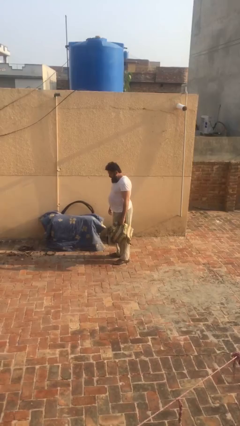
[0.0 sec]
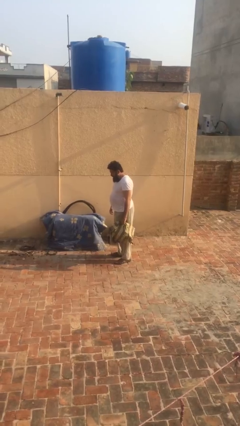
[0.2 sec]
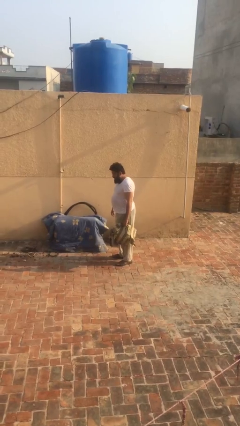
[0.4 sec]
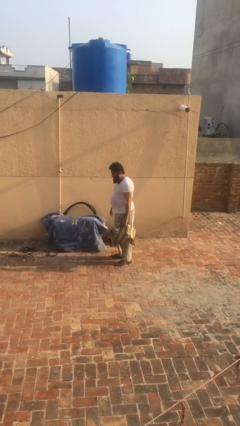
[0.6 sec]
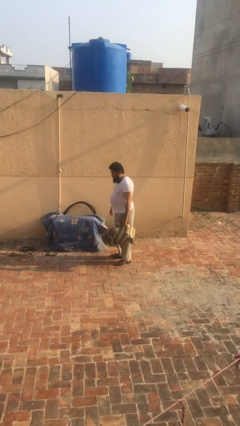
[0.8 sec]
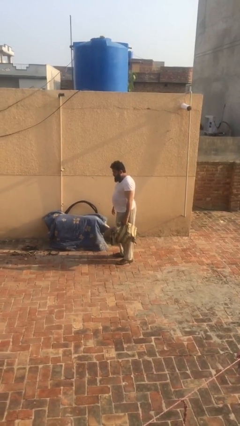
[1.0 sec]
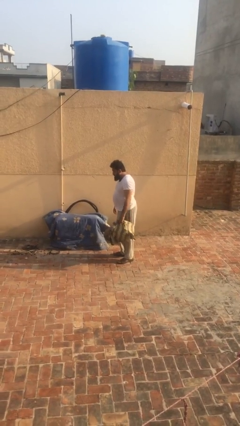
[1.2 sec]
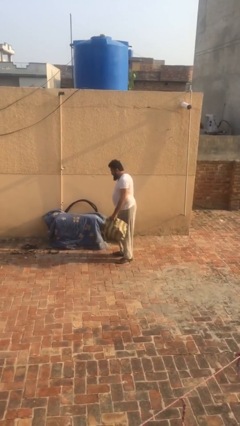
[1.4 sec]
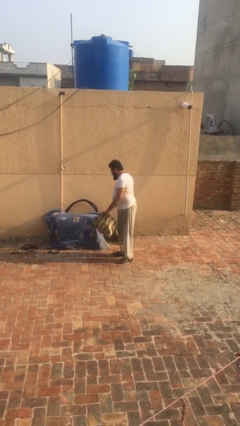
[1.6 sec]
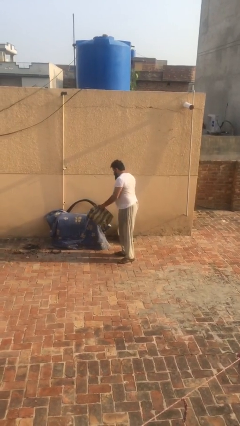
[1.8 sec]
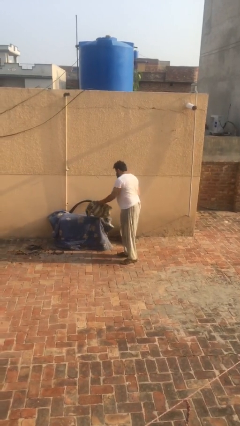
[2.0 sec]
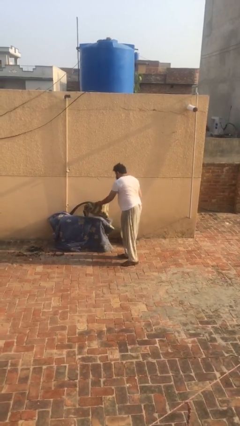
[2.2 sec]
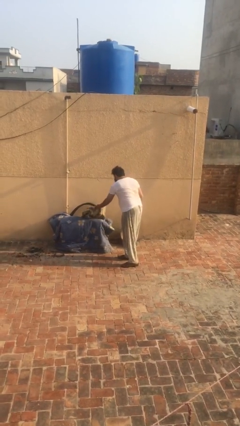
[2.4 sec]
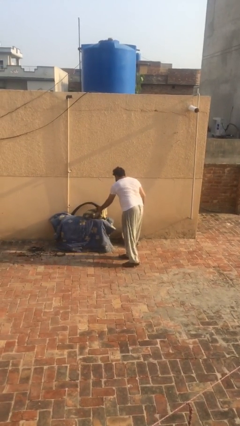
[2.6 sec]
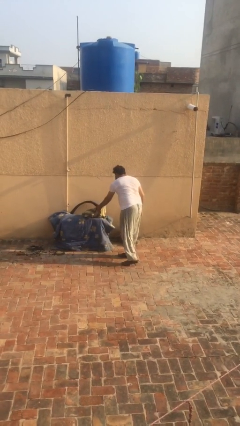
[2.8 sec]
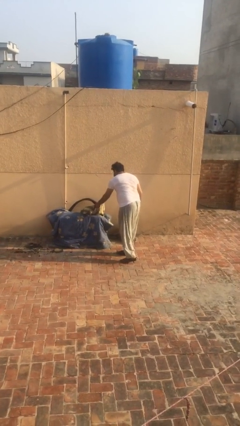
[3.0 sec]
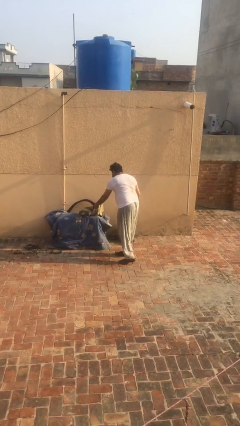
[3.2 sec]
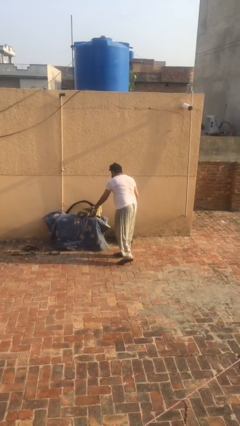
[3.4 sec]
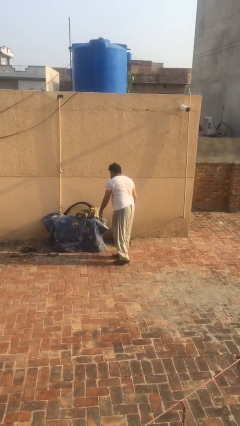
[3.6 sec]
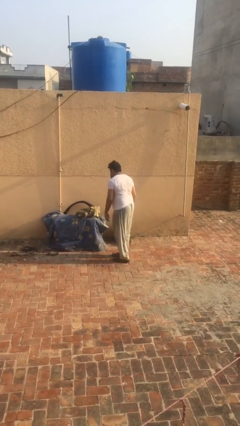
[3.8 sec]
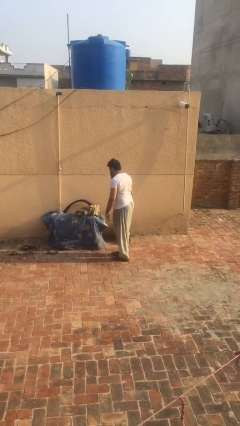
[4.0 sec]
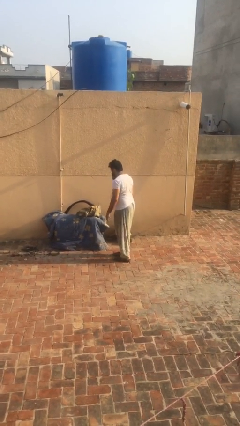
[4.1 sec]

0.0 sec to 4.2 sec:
person puts down object on table

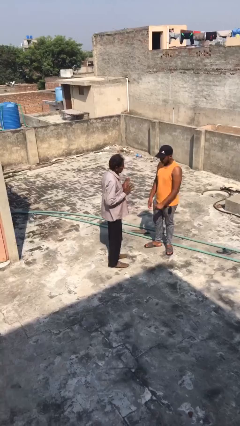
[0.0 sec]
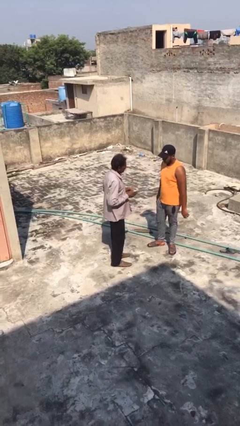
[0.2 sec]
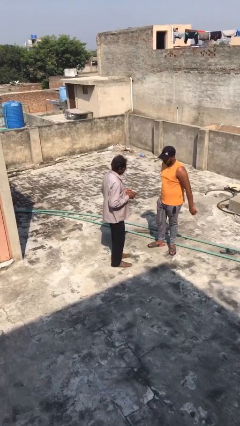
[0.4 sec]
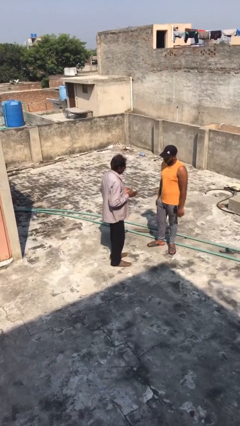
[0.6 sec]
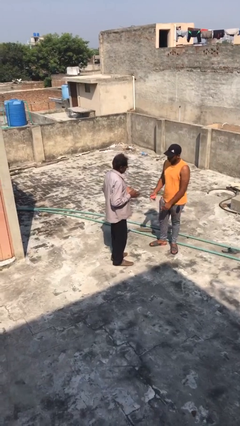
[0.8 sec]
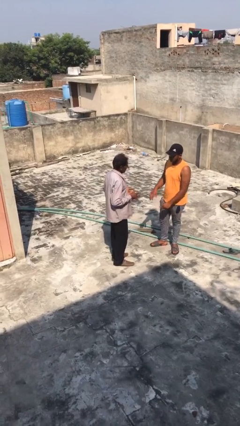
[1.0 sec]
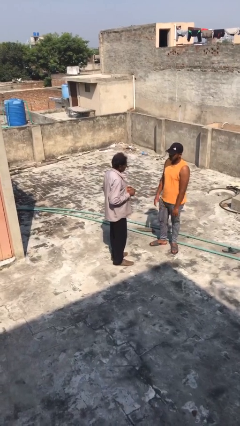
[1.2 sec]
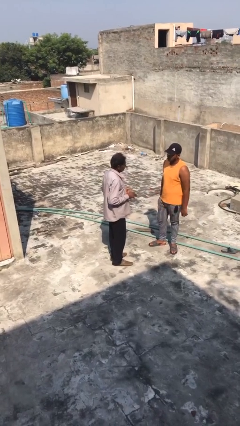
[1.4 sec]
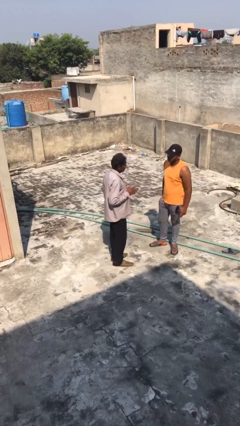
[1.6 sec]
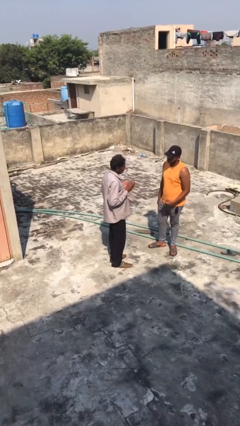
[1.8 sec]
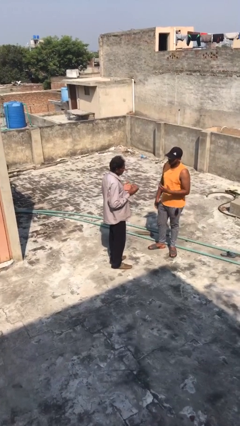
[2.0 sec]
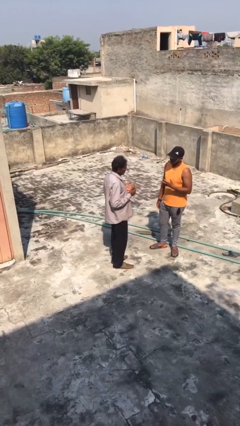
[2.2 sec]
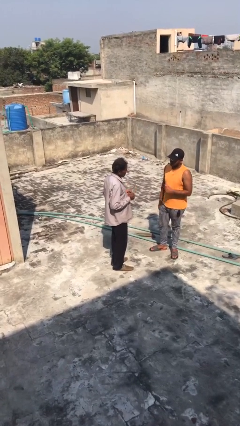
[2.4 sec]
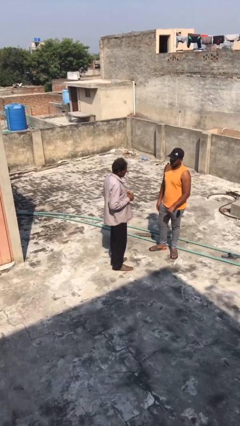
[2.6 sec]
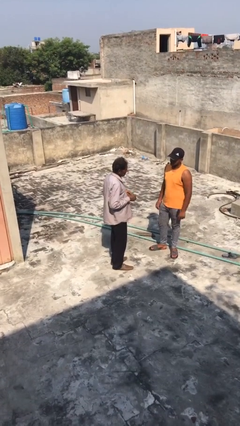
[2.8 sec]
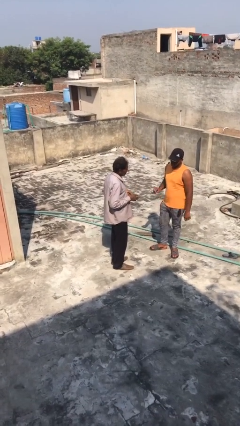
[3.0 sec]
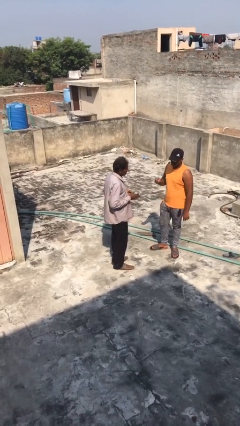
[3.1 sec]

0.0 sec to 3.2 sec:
person talks to person

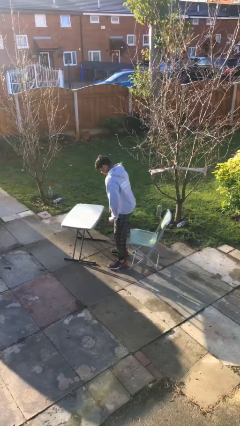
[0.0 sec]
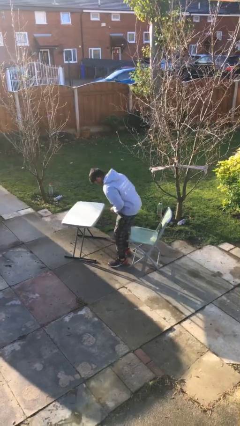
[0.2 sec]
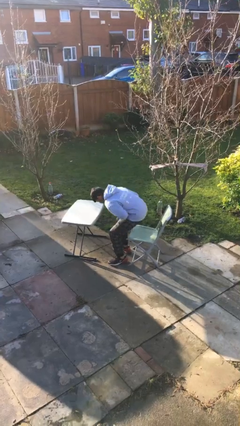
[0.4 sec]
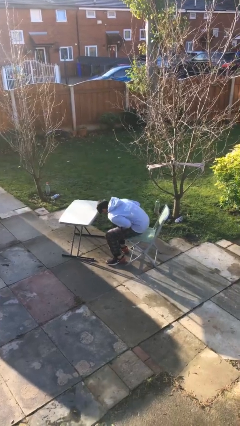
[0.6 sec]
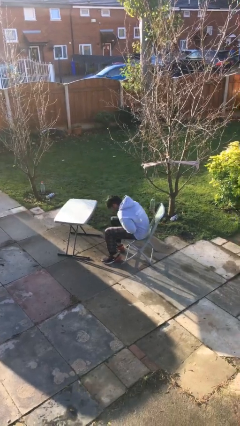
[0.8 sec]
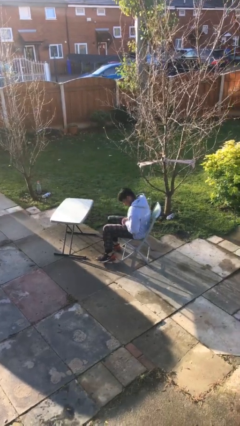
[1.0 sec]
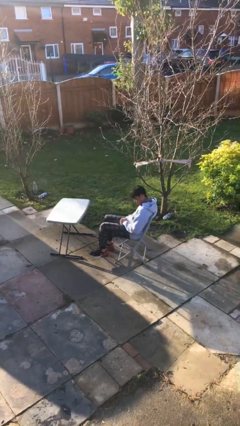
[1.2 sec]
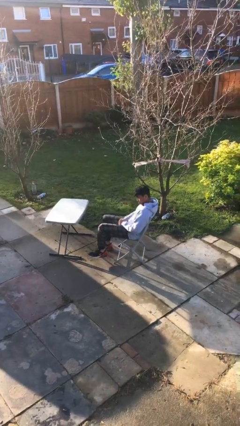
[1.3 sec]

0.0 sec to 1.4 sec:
person sits down

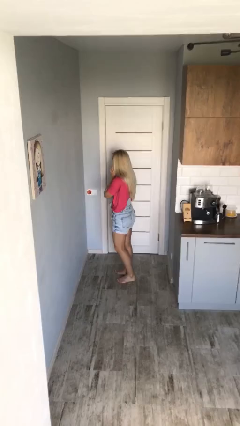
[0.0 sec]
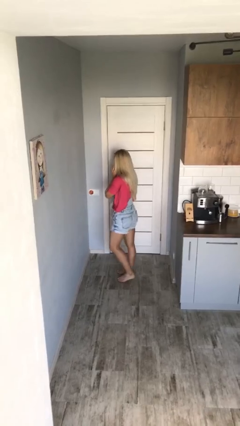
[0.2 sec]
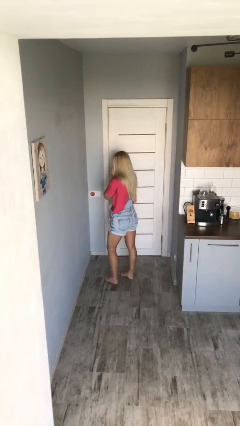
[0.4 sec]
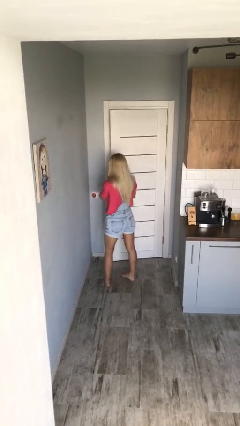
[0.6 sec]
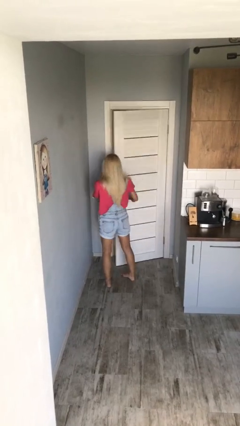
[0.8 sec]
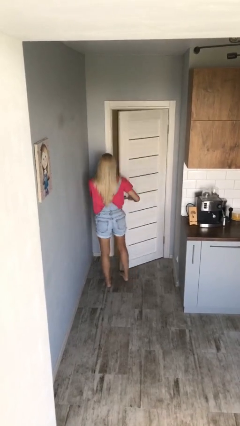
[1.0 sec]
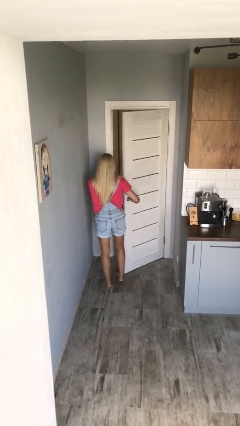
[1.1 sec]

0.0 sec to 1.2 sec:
person opens facility door

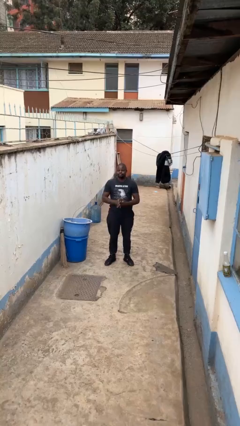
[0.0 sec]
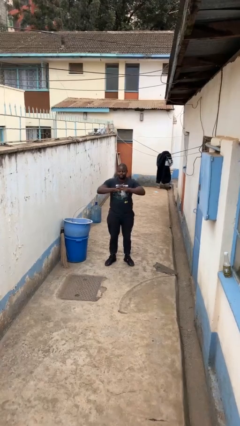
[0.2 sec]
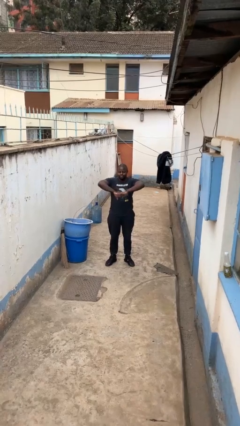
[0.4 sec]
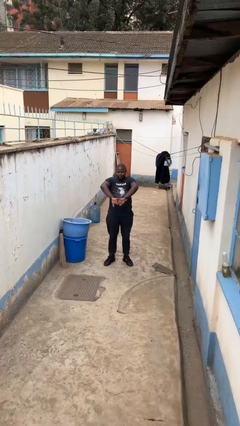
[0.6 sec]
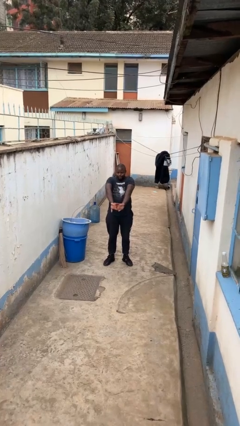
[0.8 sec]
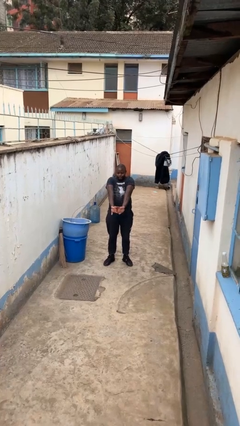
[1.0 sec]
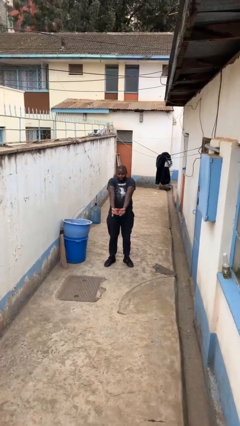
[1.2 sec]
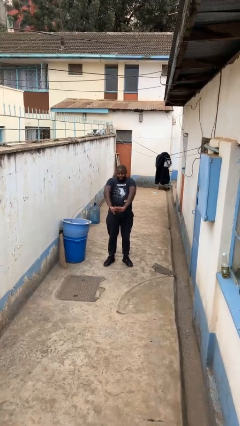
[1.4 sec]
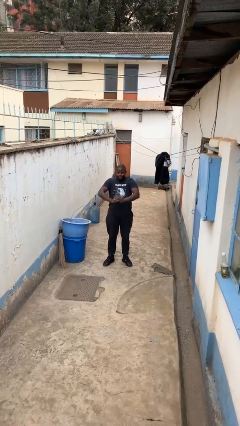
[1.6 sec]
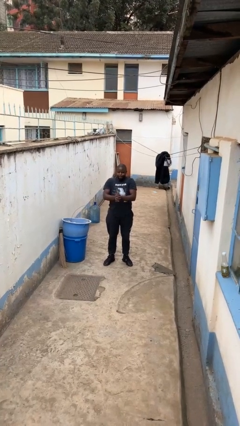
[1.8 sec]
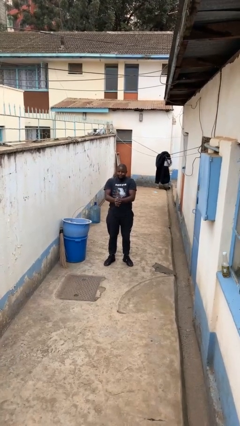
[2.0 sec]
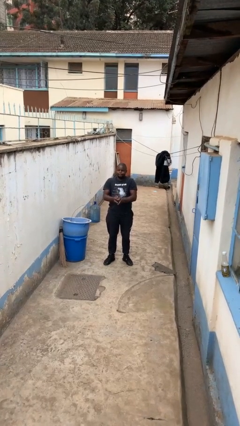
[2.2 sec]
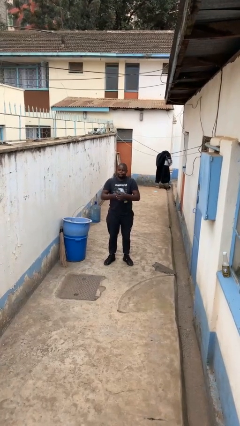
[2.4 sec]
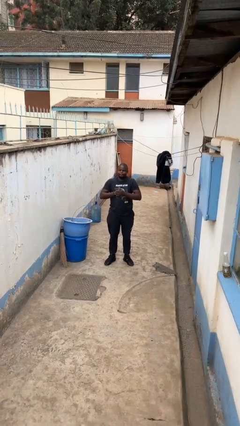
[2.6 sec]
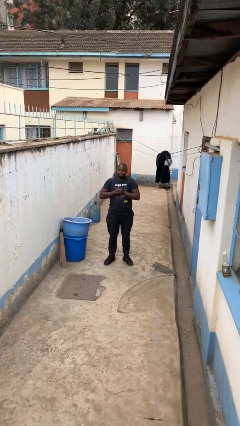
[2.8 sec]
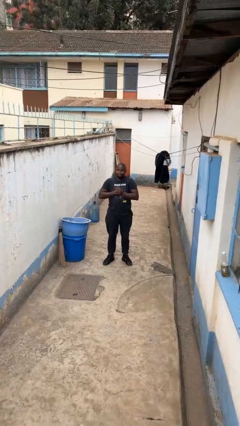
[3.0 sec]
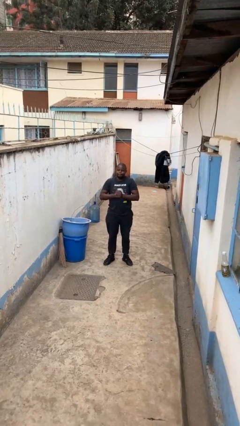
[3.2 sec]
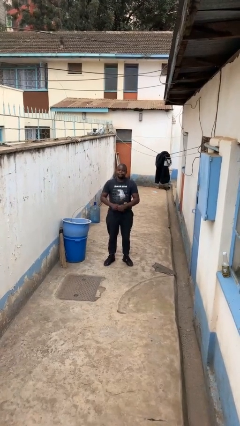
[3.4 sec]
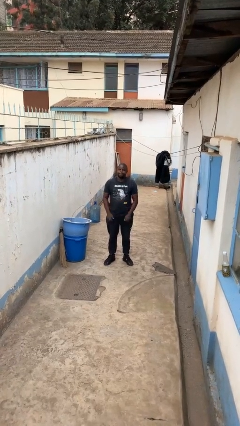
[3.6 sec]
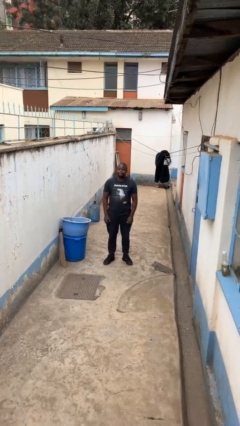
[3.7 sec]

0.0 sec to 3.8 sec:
person cracks knuckles

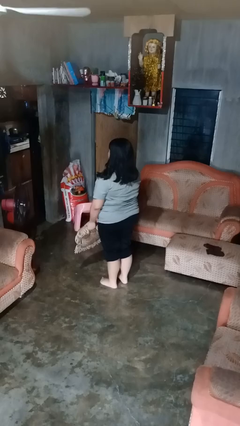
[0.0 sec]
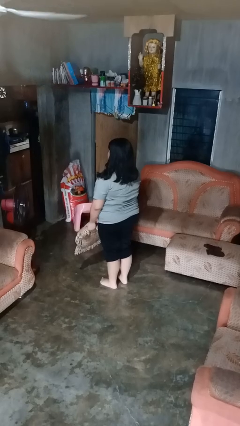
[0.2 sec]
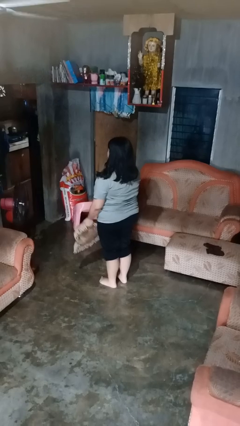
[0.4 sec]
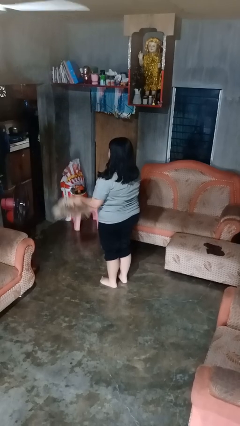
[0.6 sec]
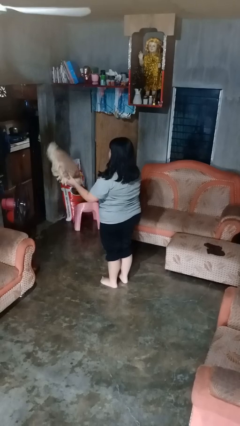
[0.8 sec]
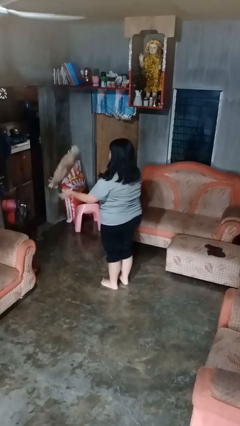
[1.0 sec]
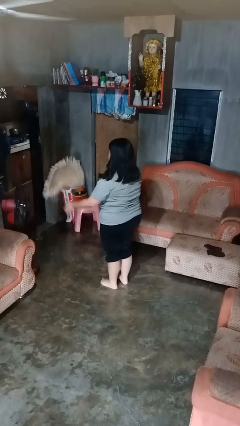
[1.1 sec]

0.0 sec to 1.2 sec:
person throws object into air

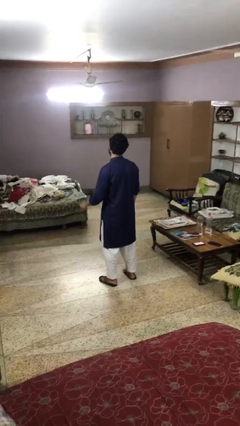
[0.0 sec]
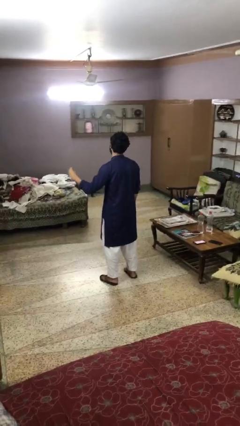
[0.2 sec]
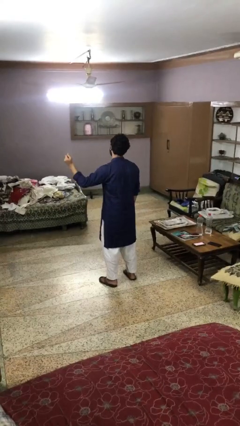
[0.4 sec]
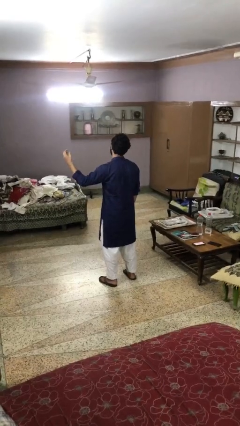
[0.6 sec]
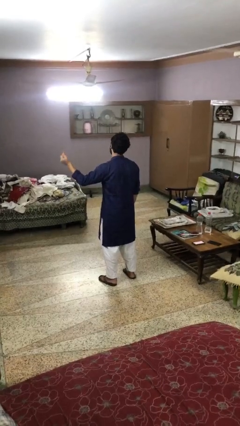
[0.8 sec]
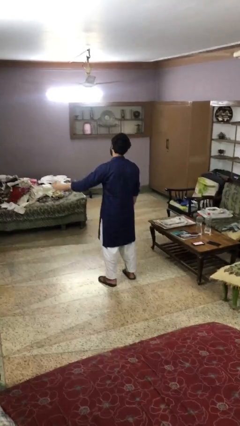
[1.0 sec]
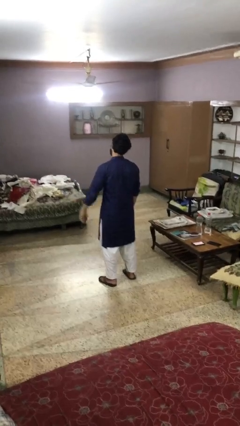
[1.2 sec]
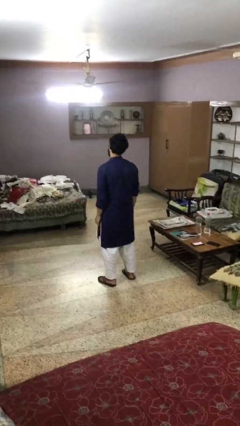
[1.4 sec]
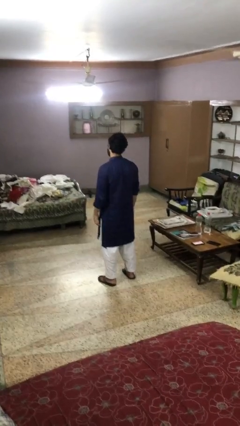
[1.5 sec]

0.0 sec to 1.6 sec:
person snaps fingers

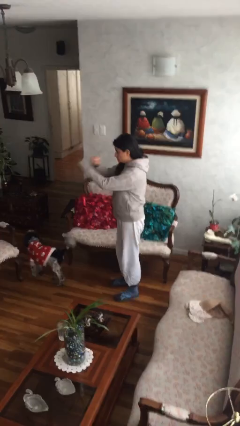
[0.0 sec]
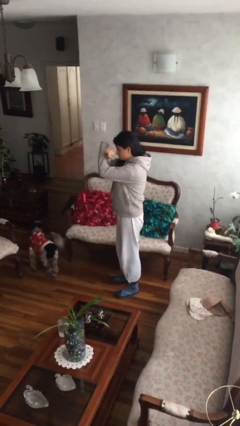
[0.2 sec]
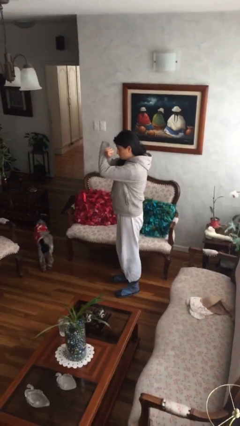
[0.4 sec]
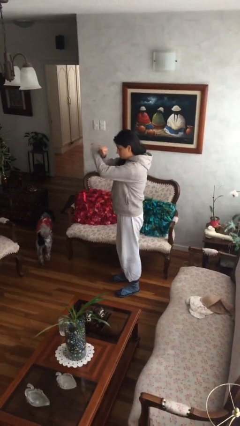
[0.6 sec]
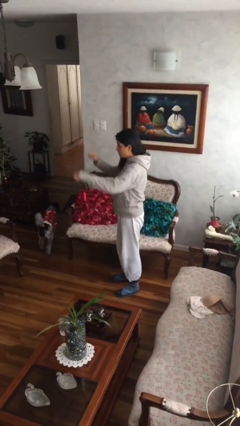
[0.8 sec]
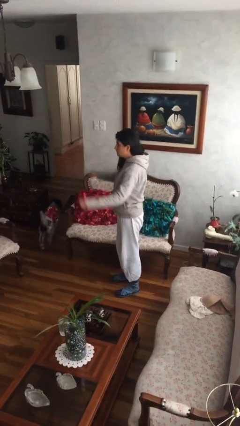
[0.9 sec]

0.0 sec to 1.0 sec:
person gestures arms x
